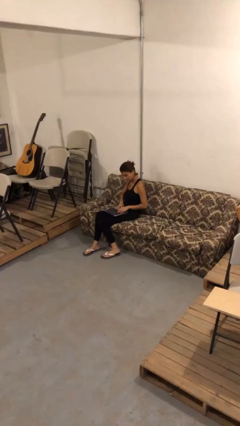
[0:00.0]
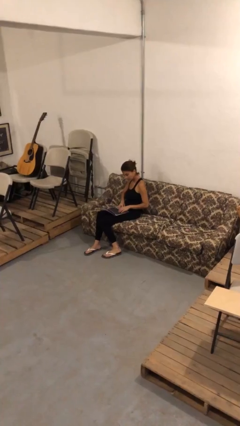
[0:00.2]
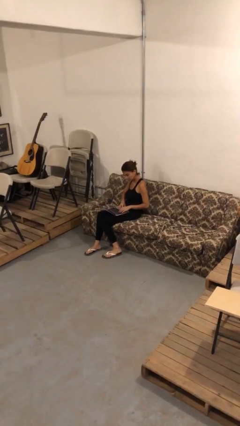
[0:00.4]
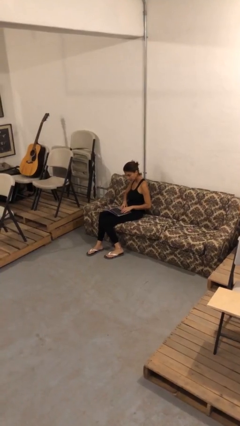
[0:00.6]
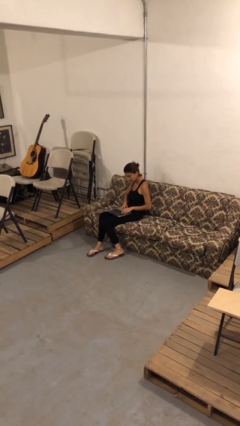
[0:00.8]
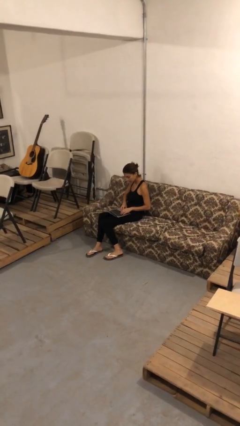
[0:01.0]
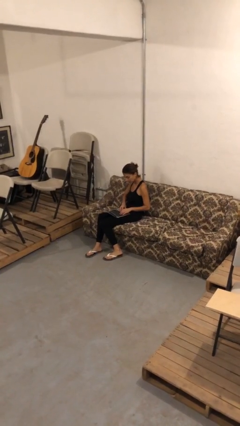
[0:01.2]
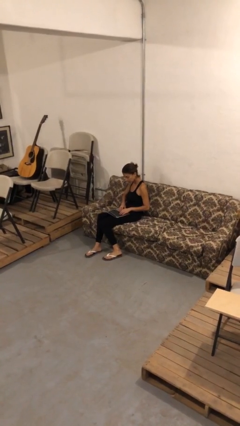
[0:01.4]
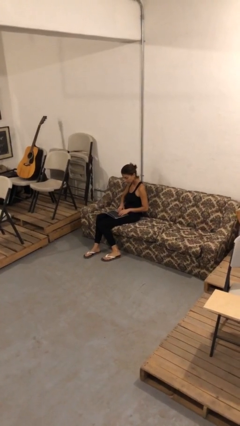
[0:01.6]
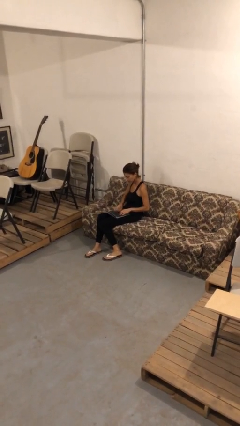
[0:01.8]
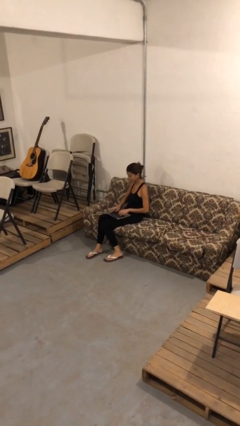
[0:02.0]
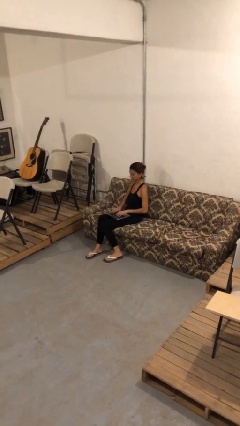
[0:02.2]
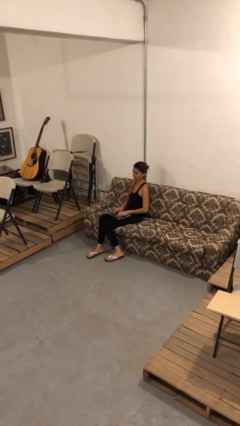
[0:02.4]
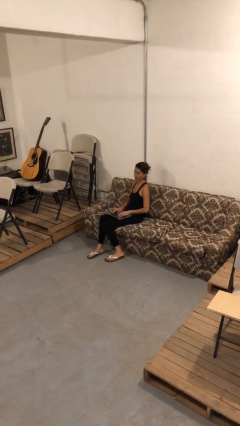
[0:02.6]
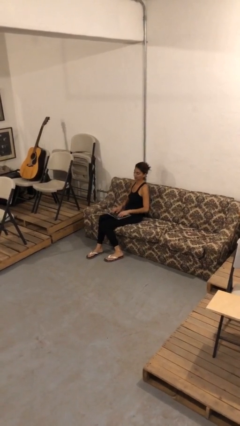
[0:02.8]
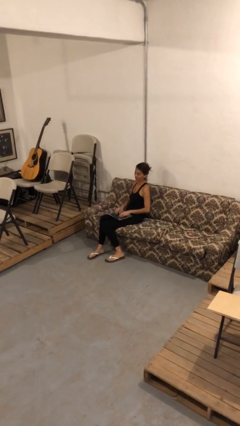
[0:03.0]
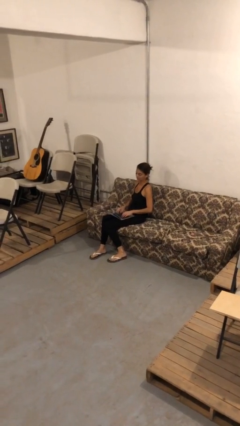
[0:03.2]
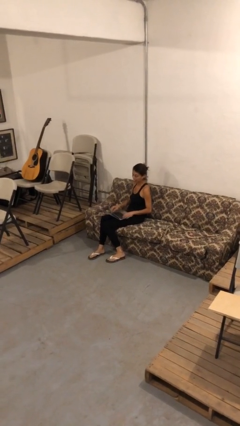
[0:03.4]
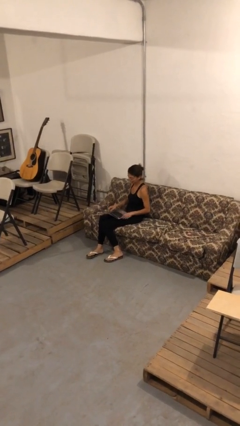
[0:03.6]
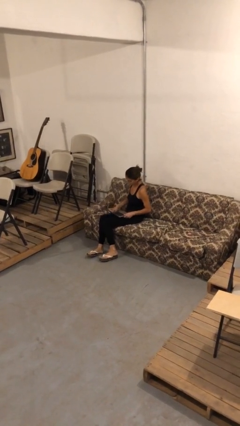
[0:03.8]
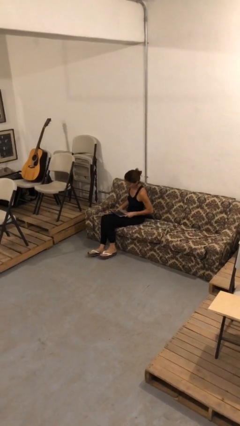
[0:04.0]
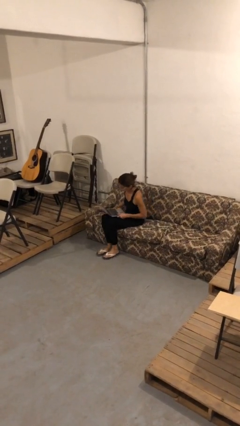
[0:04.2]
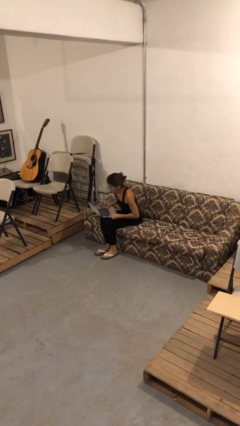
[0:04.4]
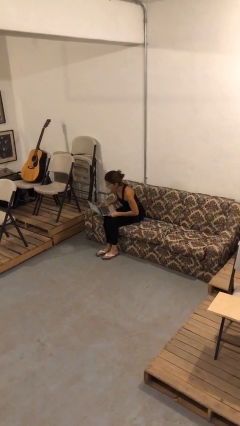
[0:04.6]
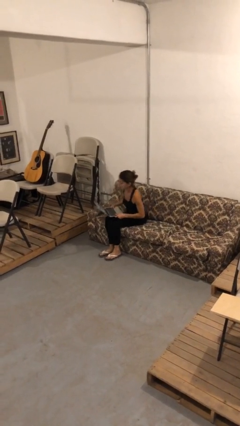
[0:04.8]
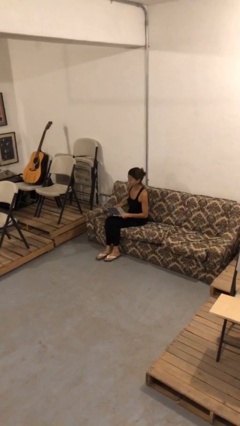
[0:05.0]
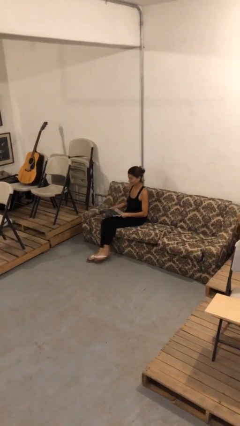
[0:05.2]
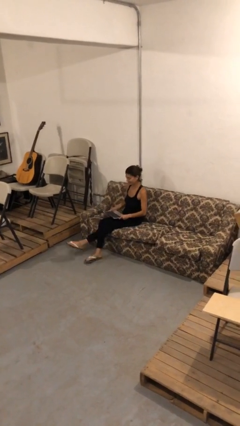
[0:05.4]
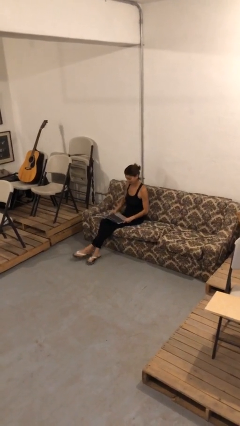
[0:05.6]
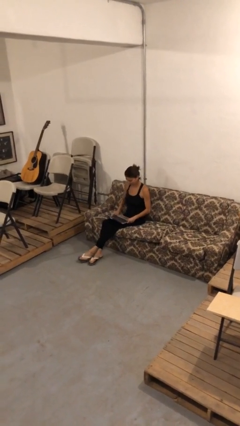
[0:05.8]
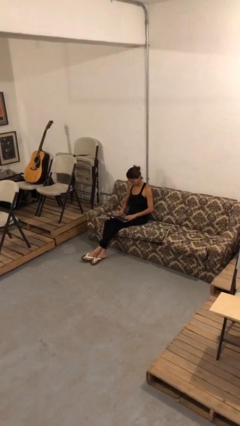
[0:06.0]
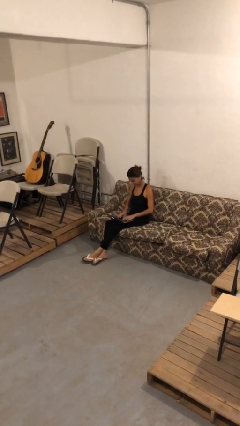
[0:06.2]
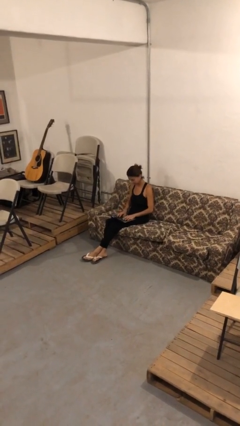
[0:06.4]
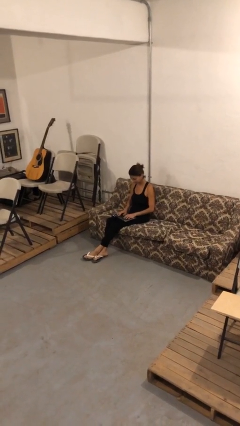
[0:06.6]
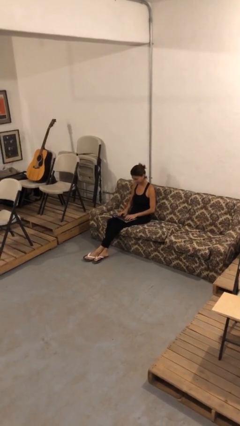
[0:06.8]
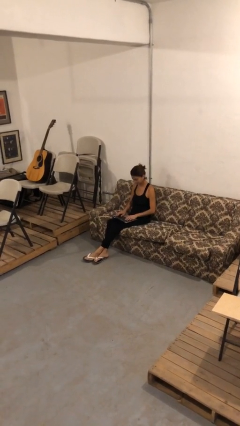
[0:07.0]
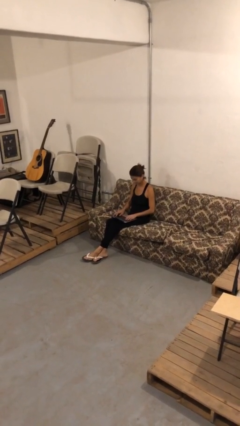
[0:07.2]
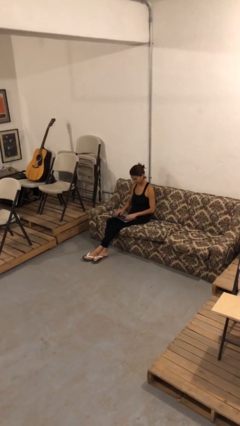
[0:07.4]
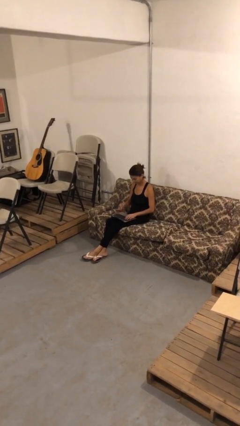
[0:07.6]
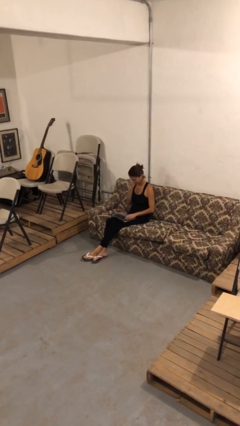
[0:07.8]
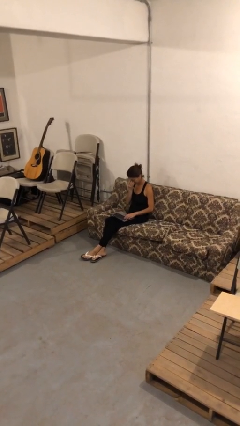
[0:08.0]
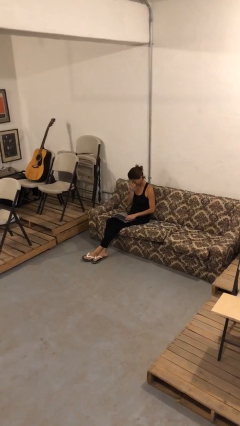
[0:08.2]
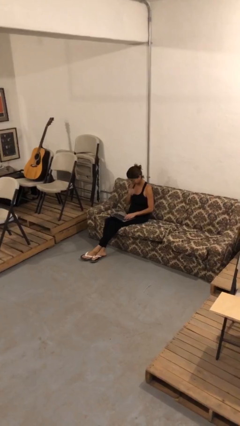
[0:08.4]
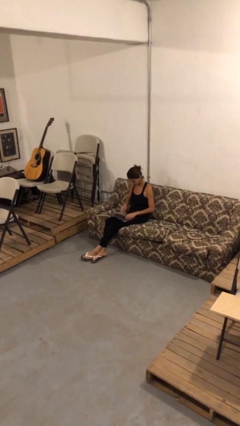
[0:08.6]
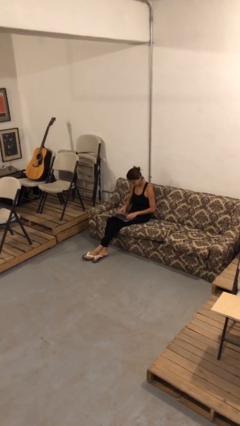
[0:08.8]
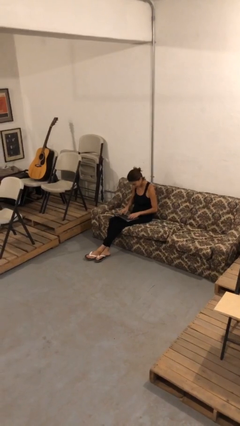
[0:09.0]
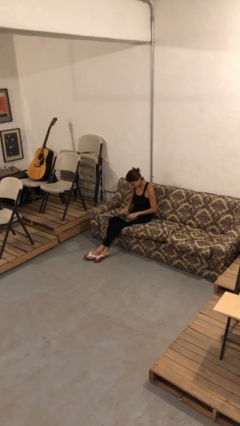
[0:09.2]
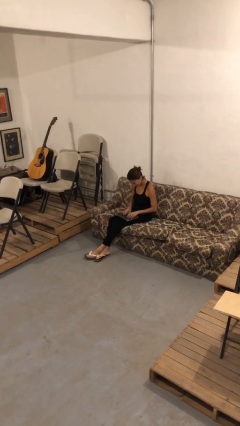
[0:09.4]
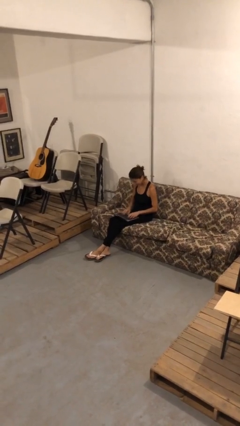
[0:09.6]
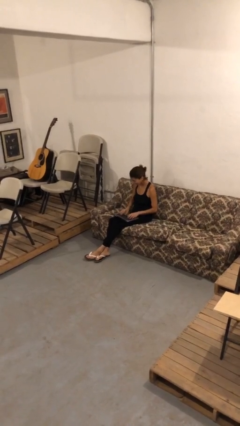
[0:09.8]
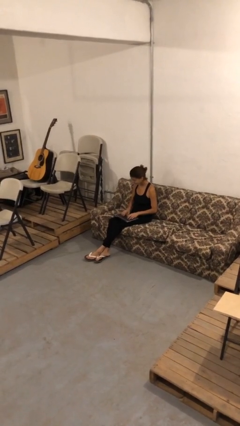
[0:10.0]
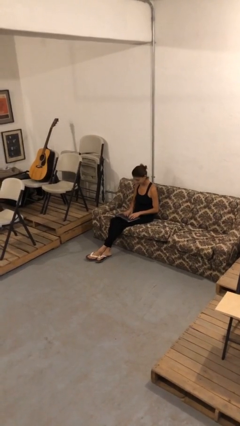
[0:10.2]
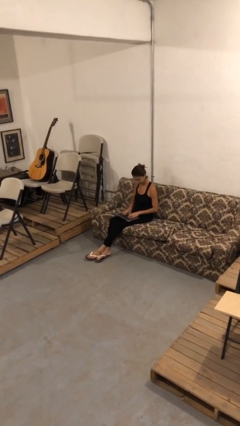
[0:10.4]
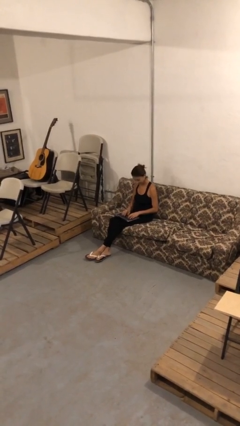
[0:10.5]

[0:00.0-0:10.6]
person interacts with laptop

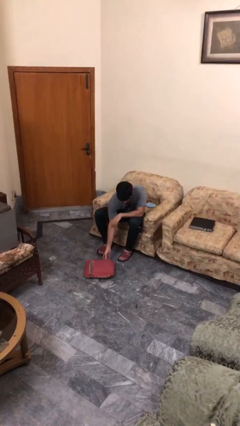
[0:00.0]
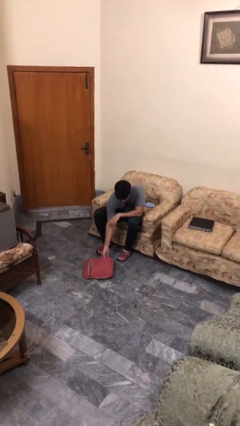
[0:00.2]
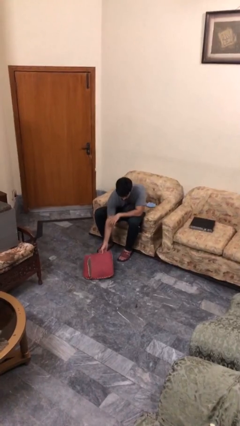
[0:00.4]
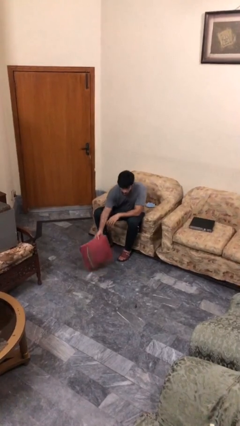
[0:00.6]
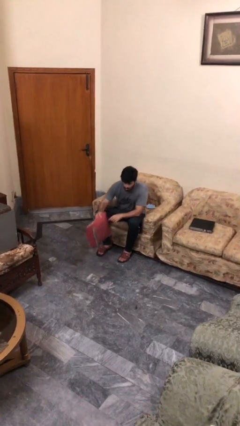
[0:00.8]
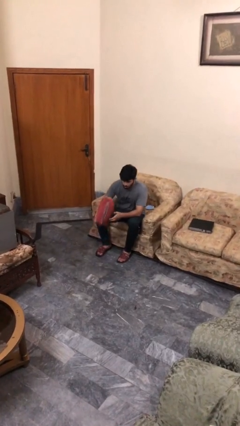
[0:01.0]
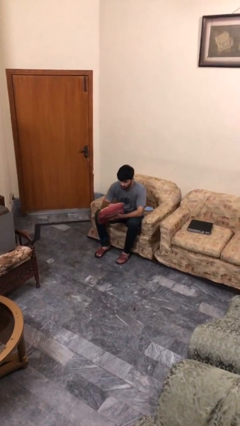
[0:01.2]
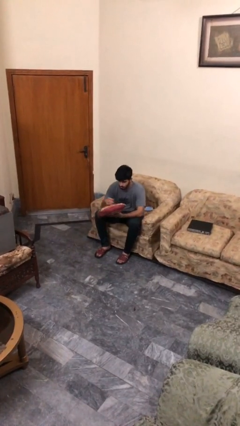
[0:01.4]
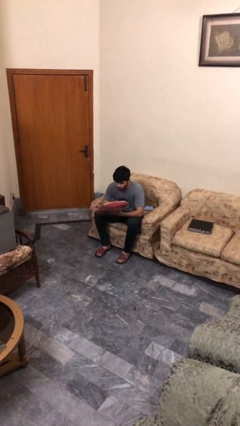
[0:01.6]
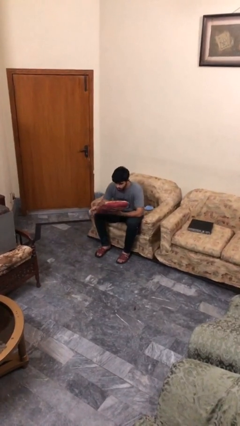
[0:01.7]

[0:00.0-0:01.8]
person picks up object from floor

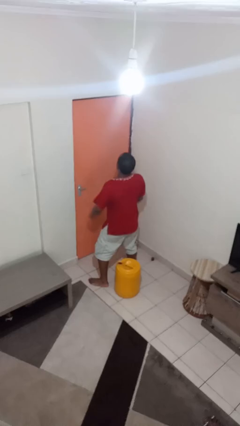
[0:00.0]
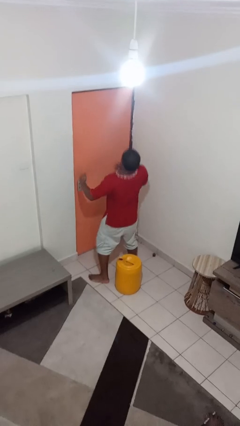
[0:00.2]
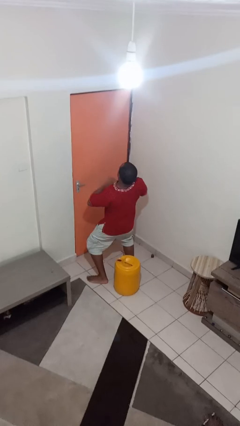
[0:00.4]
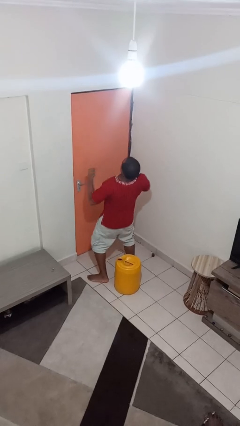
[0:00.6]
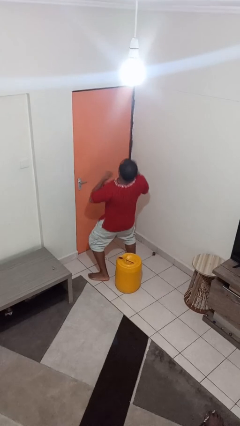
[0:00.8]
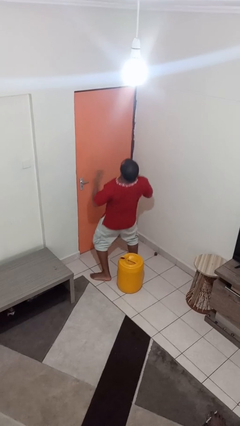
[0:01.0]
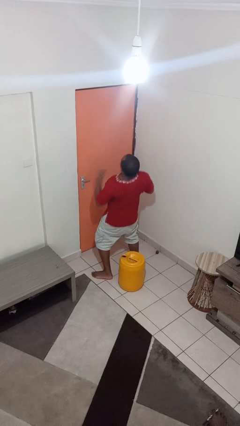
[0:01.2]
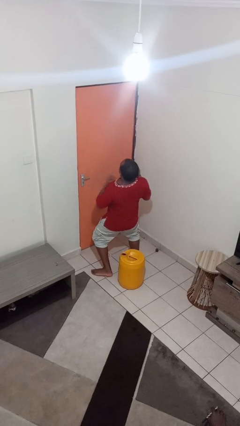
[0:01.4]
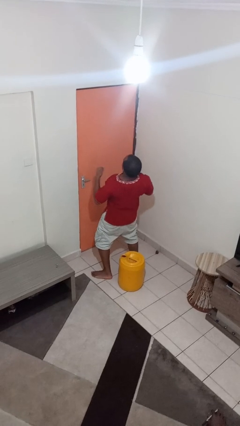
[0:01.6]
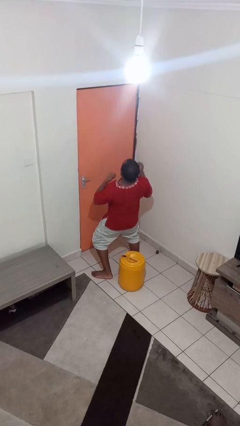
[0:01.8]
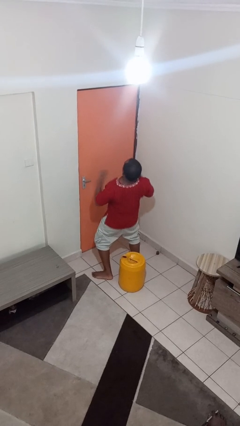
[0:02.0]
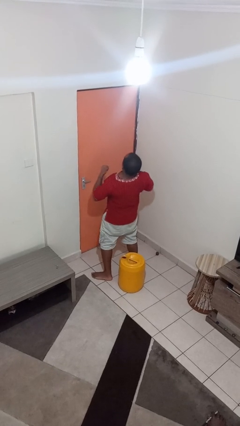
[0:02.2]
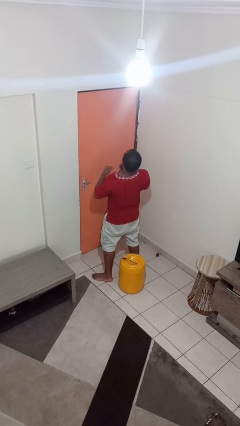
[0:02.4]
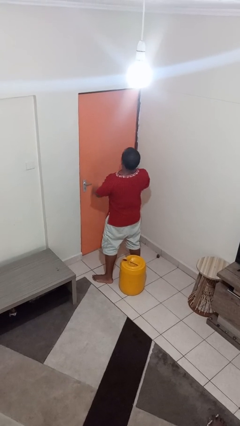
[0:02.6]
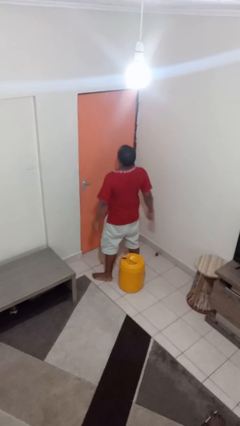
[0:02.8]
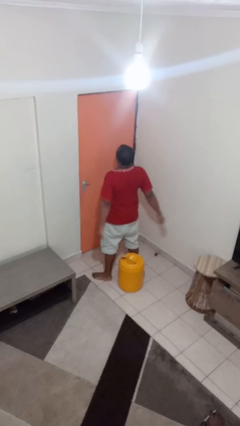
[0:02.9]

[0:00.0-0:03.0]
person drums on chest

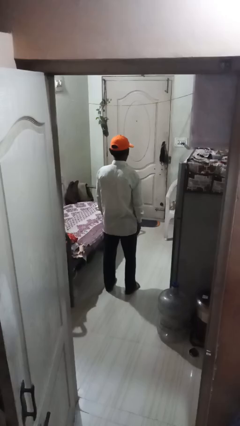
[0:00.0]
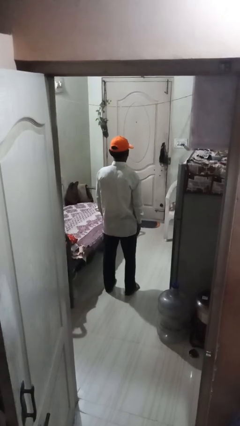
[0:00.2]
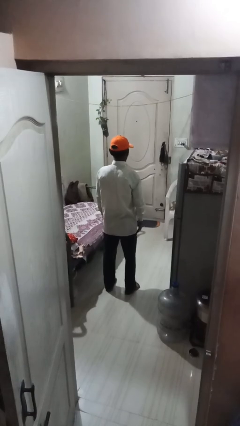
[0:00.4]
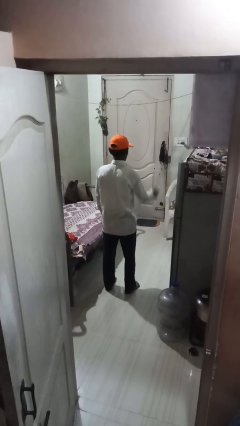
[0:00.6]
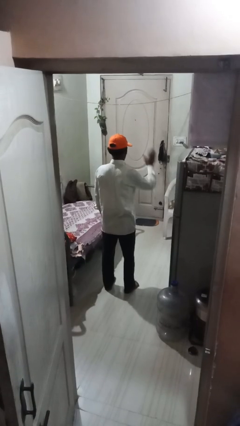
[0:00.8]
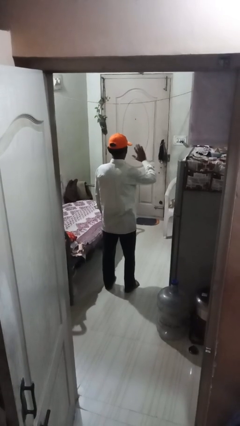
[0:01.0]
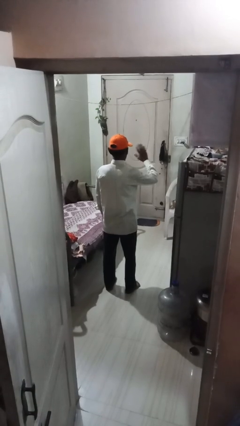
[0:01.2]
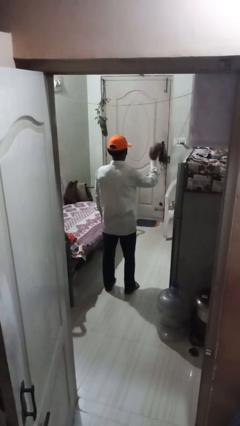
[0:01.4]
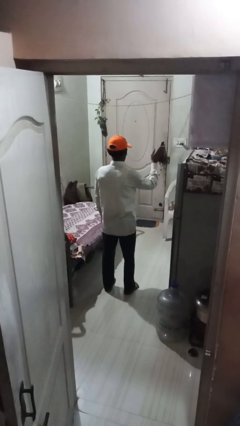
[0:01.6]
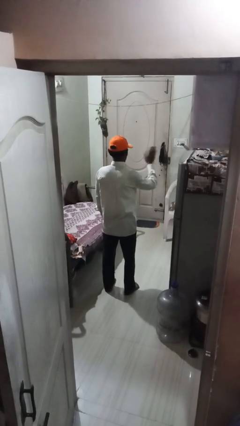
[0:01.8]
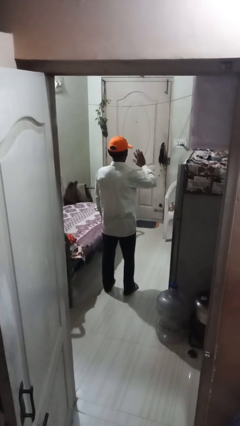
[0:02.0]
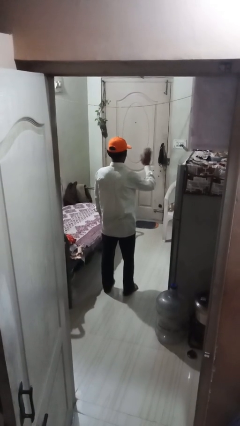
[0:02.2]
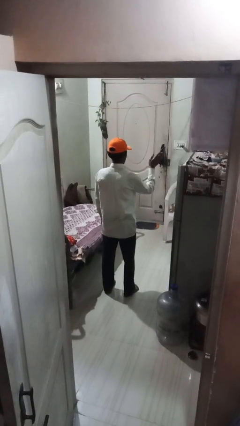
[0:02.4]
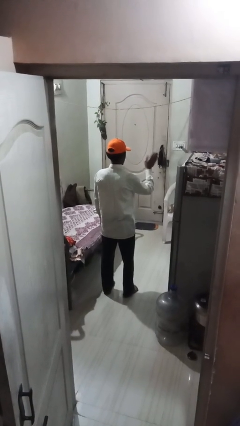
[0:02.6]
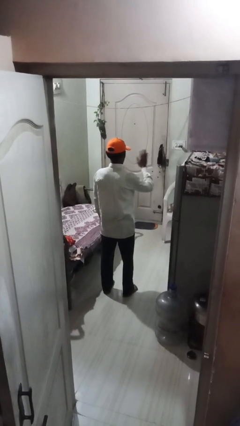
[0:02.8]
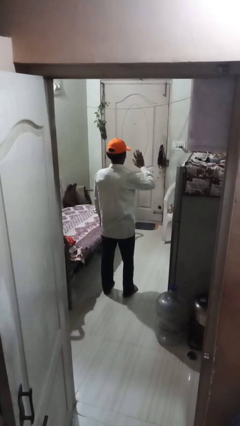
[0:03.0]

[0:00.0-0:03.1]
person waves at person
